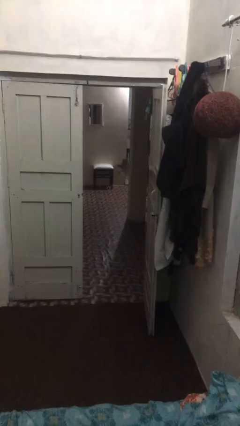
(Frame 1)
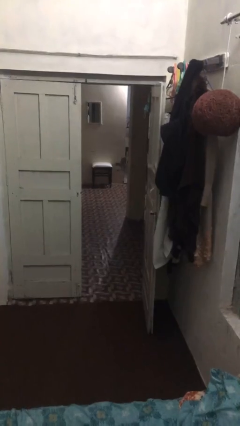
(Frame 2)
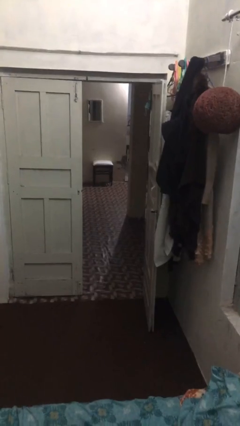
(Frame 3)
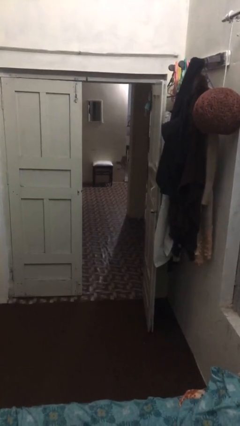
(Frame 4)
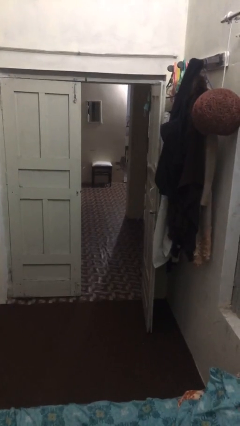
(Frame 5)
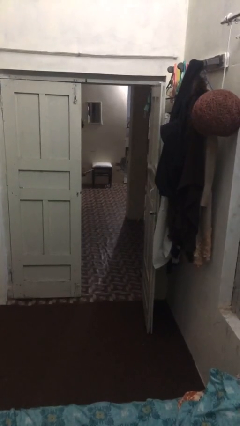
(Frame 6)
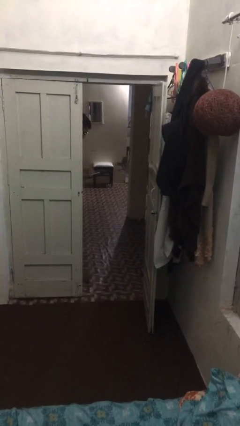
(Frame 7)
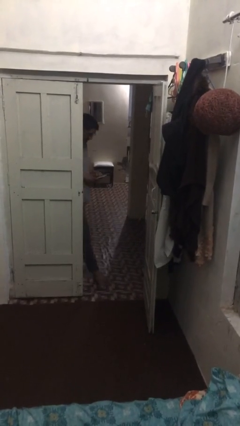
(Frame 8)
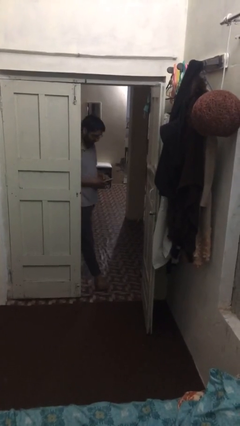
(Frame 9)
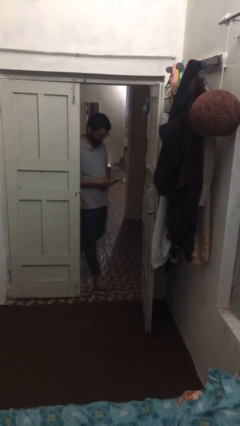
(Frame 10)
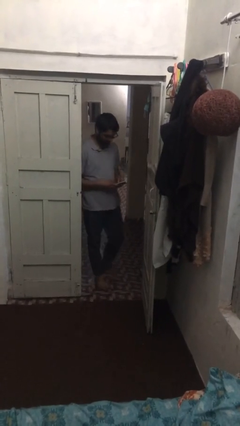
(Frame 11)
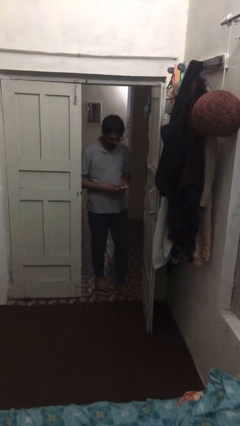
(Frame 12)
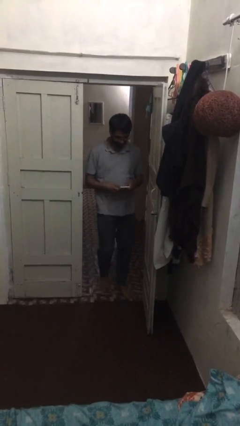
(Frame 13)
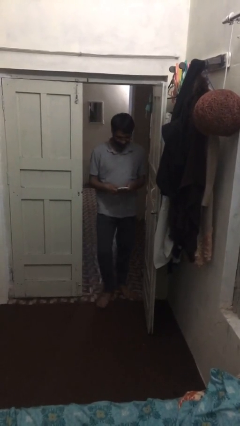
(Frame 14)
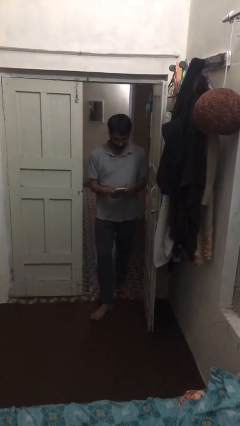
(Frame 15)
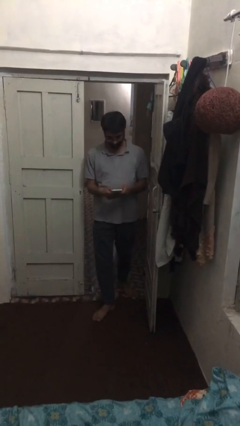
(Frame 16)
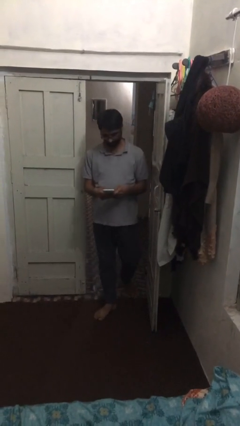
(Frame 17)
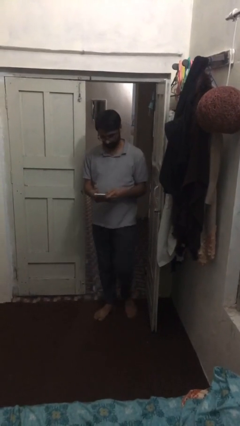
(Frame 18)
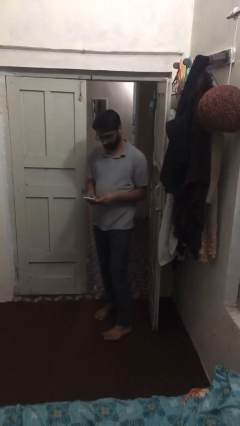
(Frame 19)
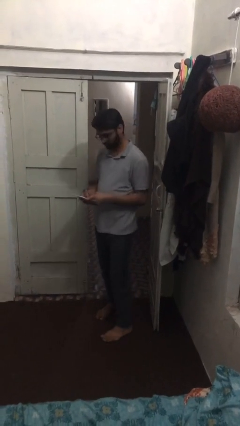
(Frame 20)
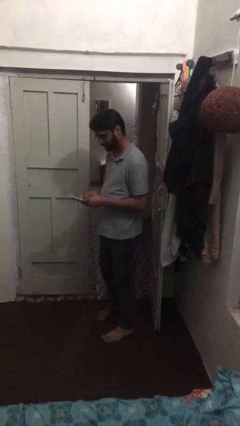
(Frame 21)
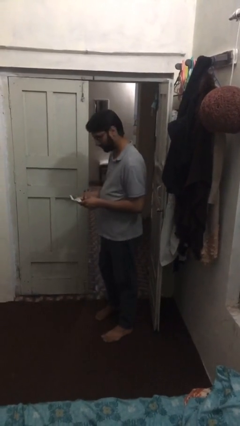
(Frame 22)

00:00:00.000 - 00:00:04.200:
person enters scene through structure

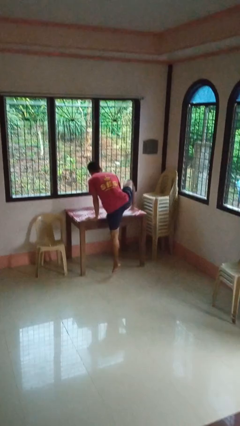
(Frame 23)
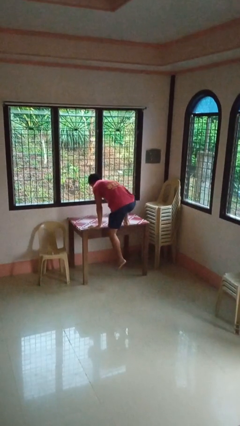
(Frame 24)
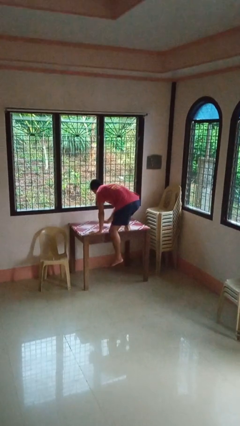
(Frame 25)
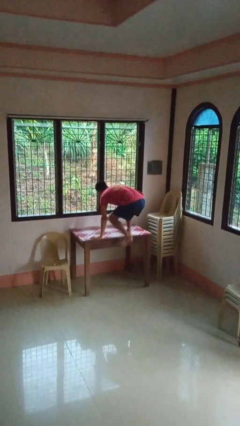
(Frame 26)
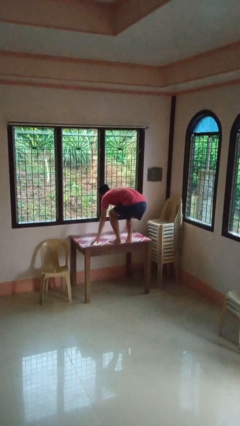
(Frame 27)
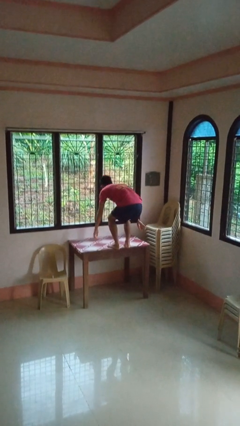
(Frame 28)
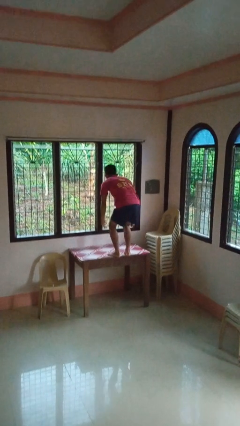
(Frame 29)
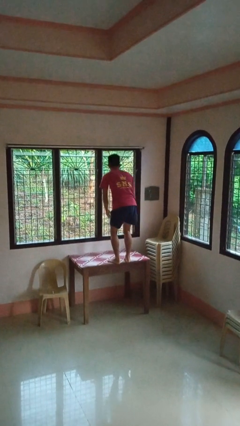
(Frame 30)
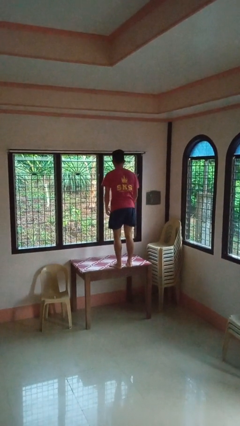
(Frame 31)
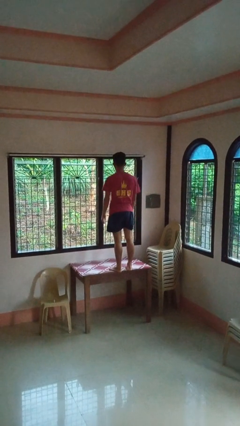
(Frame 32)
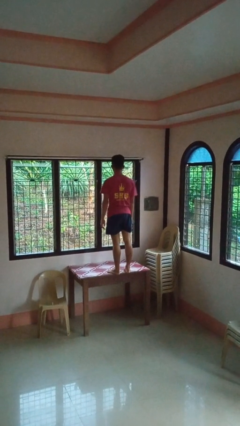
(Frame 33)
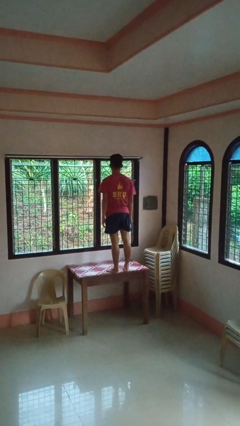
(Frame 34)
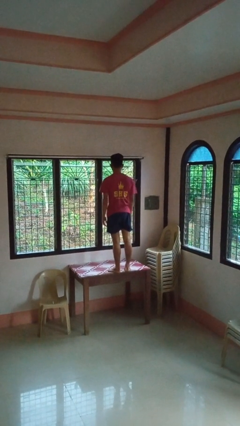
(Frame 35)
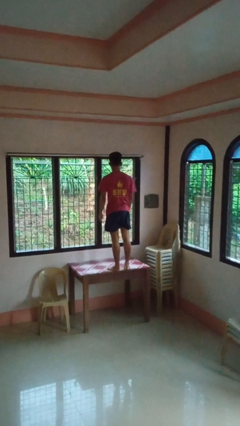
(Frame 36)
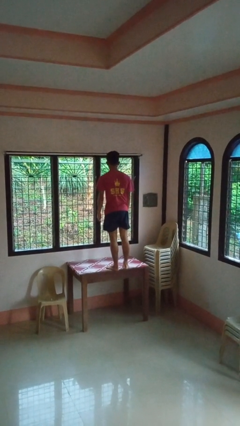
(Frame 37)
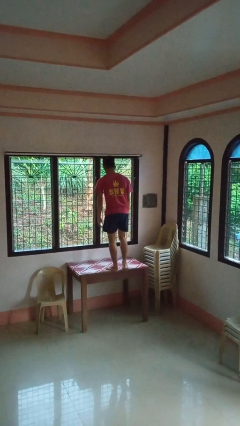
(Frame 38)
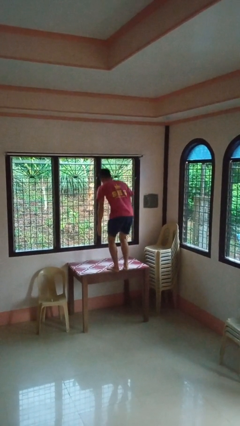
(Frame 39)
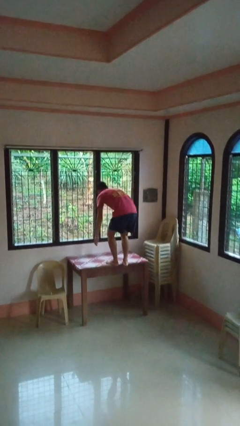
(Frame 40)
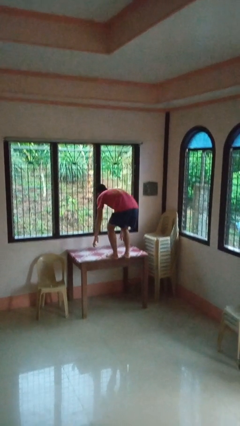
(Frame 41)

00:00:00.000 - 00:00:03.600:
person climbs on table

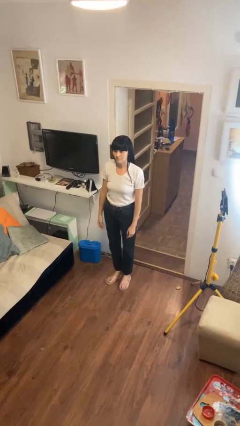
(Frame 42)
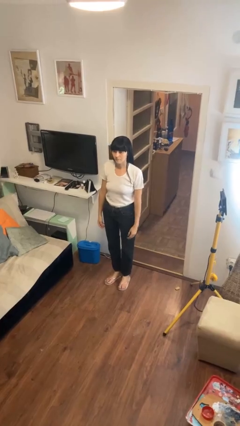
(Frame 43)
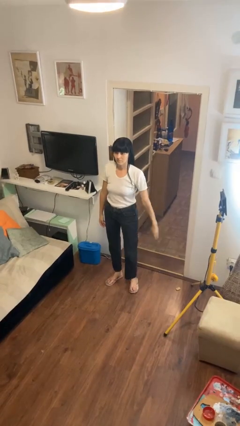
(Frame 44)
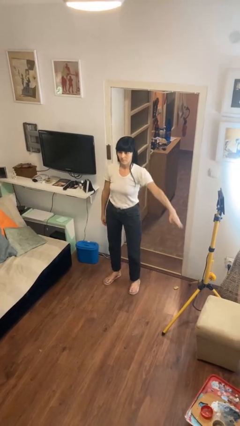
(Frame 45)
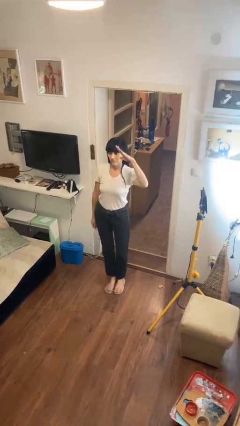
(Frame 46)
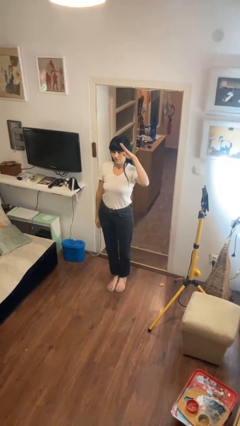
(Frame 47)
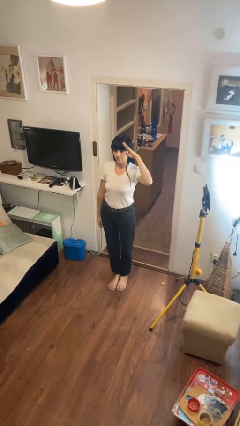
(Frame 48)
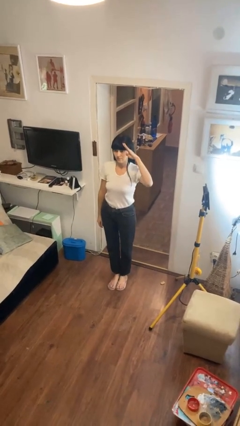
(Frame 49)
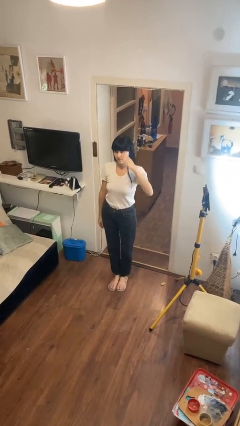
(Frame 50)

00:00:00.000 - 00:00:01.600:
person salutes

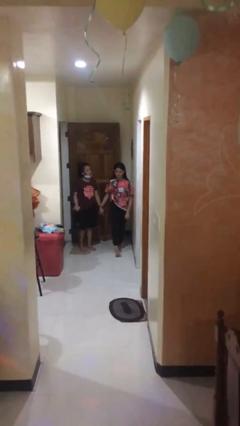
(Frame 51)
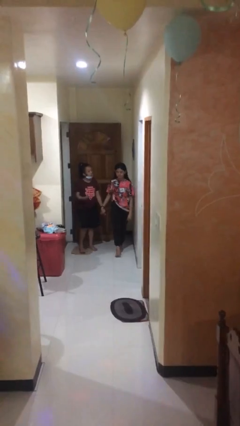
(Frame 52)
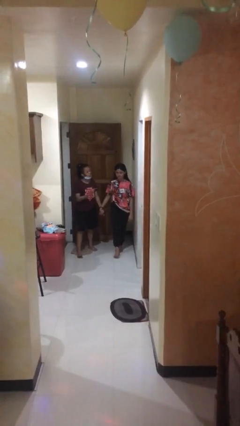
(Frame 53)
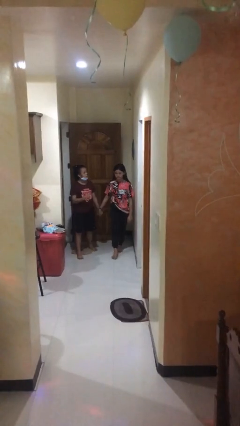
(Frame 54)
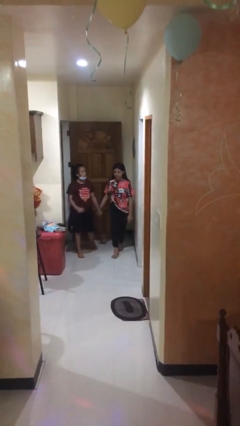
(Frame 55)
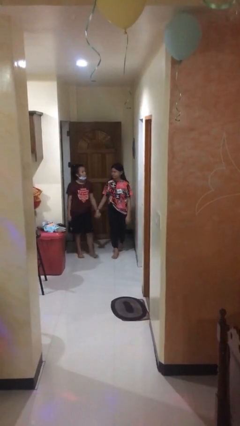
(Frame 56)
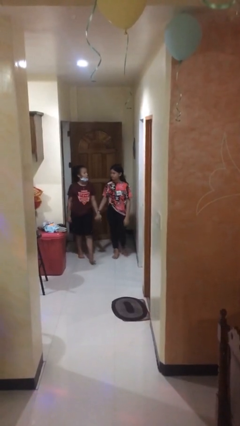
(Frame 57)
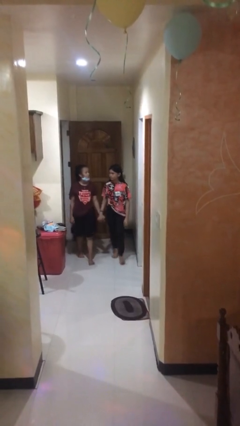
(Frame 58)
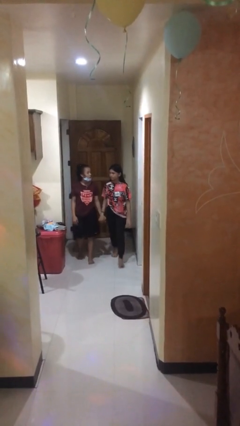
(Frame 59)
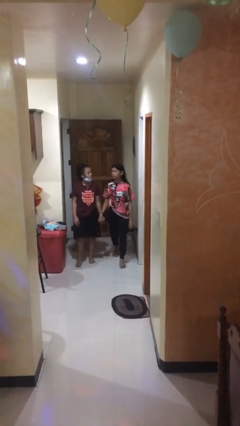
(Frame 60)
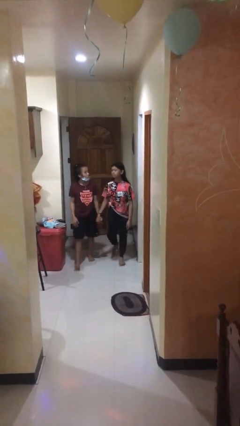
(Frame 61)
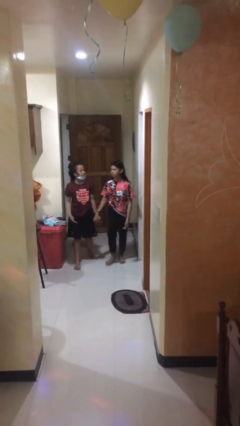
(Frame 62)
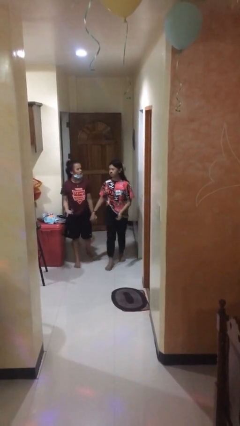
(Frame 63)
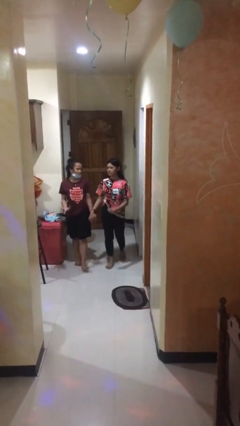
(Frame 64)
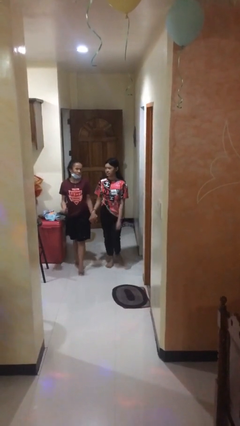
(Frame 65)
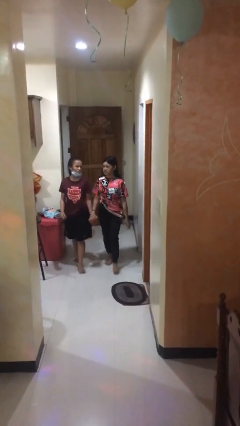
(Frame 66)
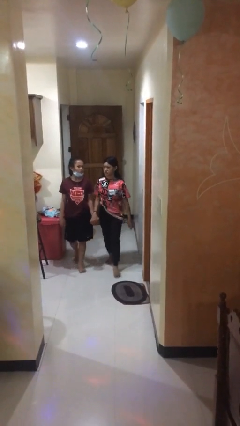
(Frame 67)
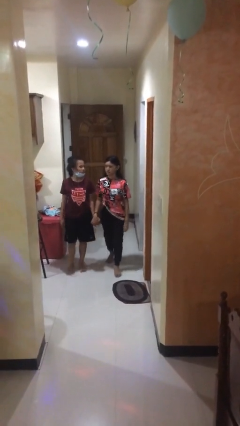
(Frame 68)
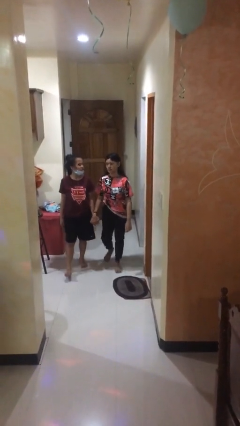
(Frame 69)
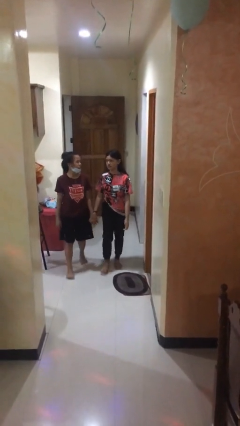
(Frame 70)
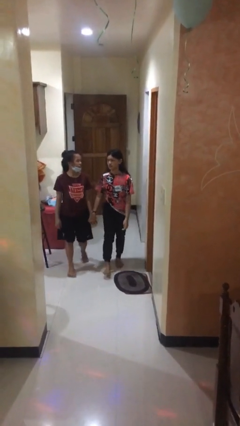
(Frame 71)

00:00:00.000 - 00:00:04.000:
person holds hand

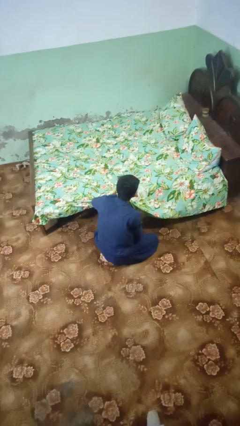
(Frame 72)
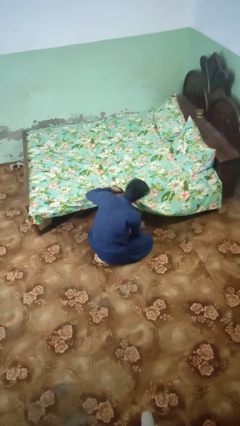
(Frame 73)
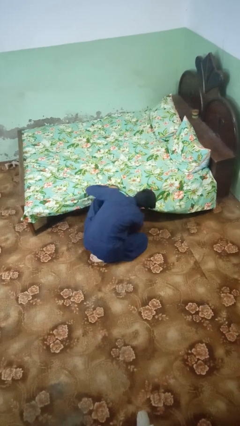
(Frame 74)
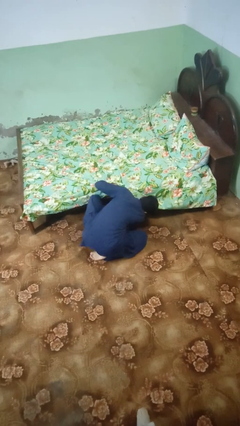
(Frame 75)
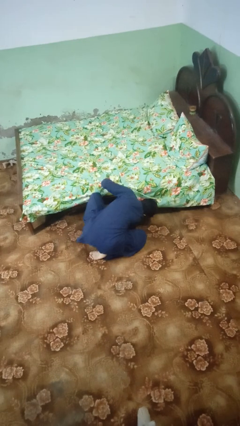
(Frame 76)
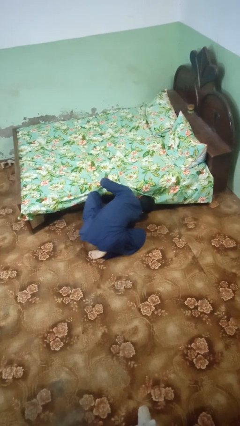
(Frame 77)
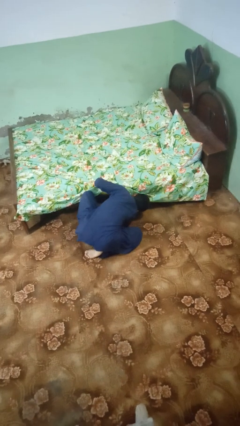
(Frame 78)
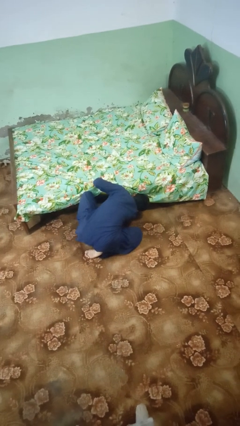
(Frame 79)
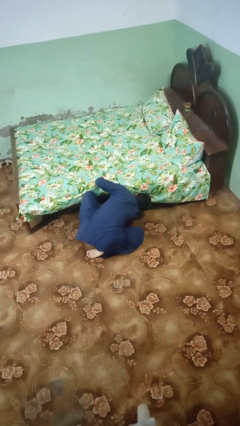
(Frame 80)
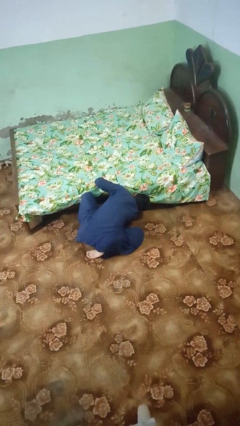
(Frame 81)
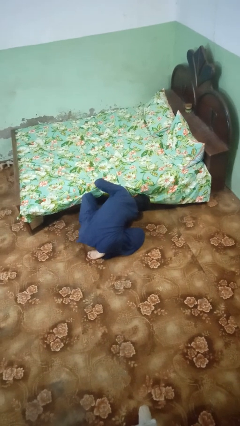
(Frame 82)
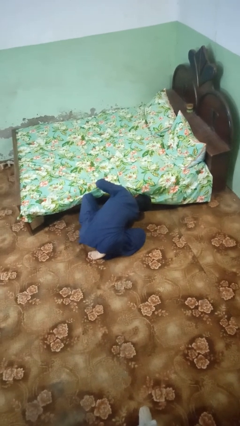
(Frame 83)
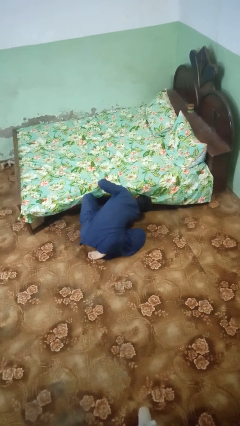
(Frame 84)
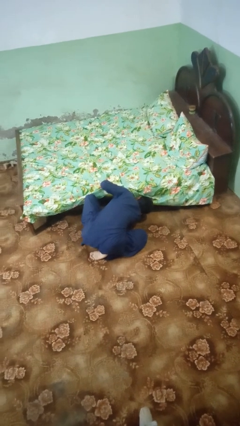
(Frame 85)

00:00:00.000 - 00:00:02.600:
person searches under bed

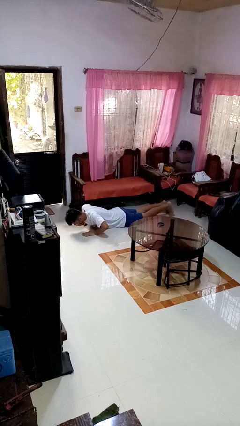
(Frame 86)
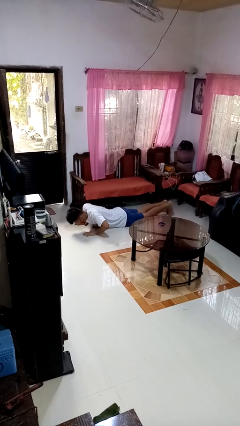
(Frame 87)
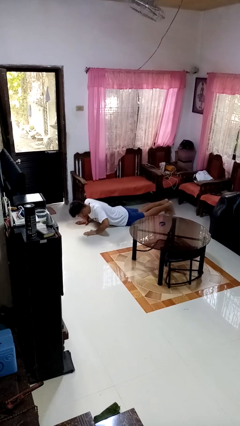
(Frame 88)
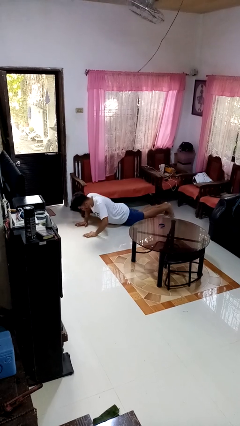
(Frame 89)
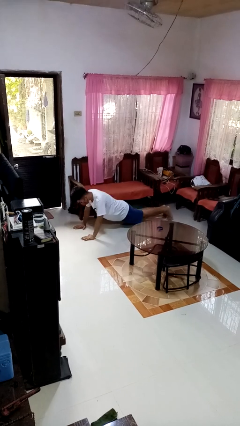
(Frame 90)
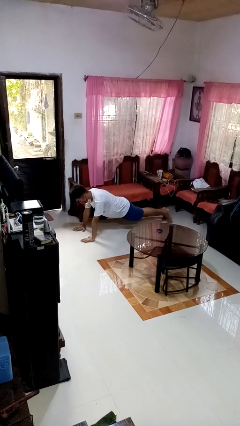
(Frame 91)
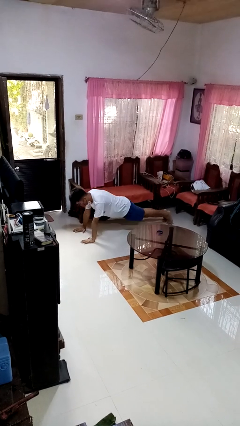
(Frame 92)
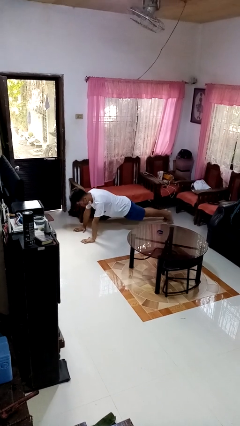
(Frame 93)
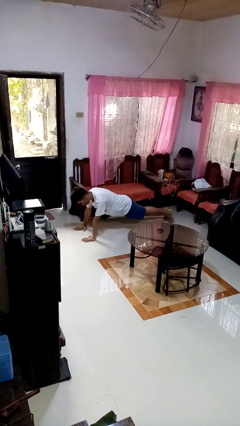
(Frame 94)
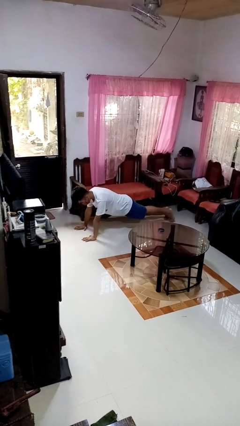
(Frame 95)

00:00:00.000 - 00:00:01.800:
person exercises with pushup
